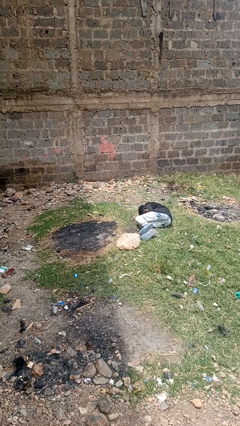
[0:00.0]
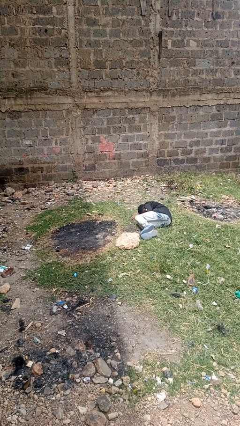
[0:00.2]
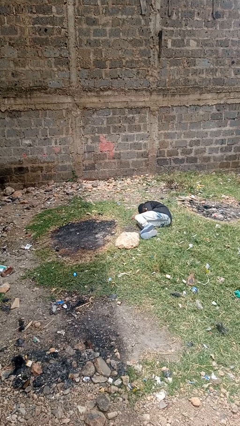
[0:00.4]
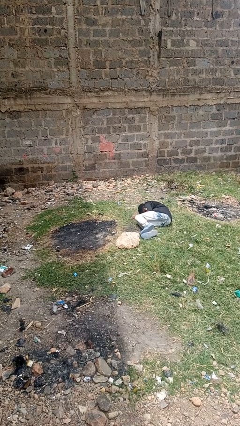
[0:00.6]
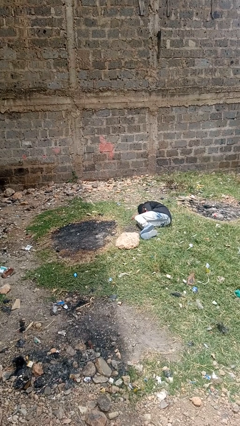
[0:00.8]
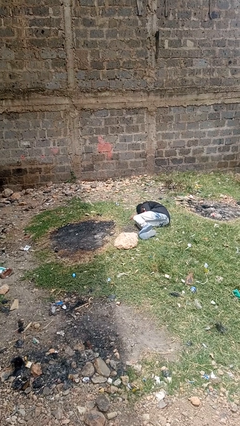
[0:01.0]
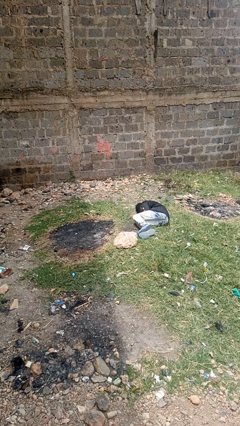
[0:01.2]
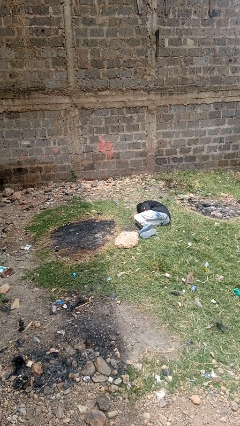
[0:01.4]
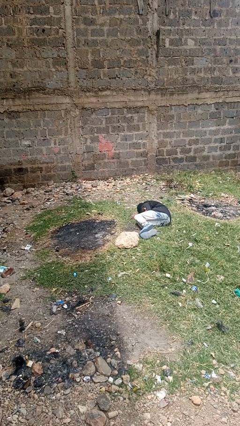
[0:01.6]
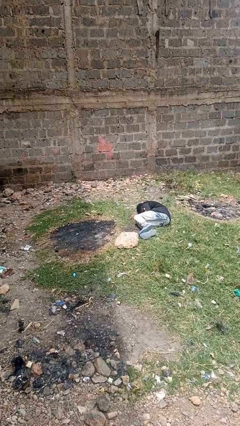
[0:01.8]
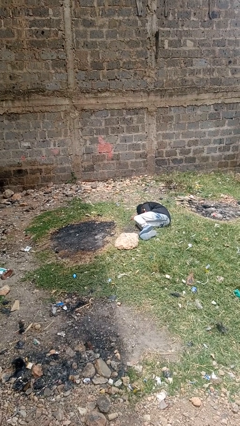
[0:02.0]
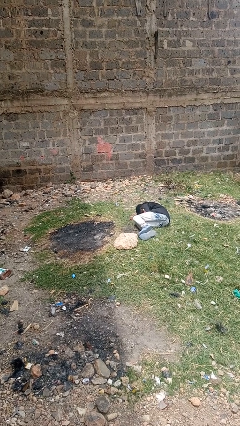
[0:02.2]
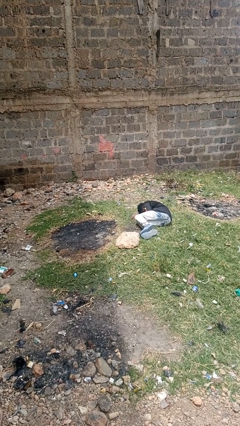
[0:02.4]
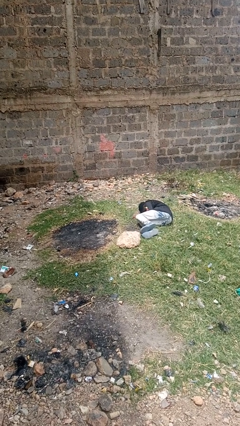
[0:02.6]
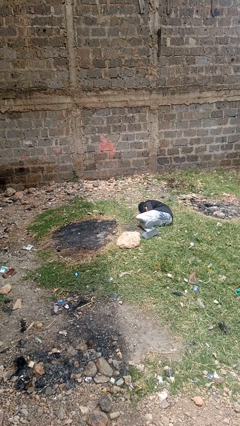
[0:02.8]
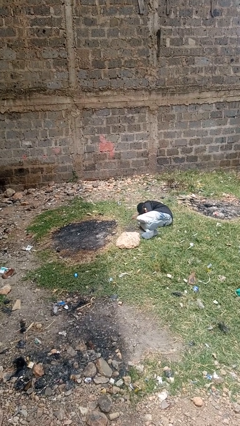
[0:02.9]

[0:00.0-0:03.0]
person lies down on floor

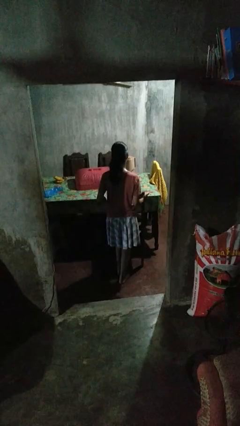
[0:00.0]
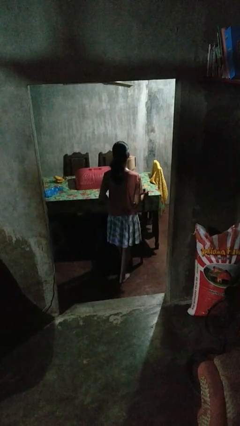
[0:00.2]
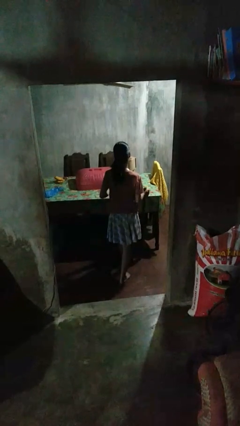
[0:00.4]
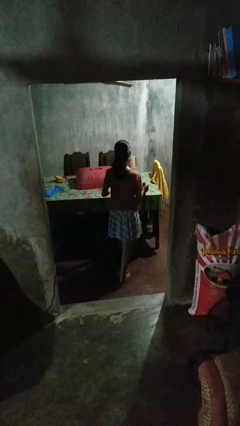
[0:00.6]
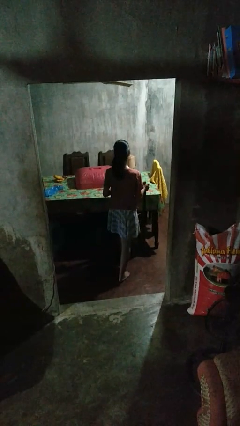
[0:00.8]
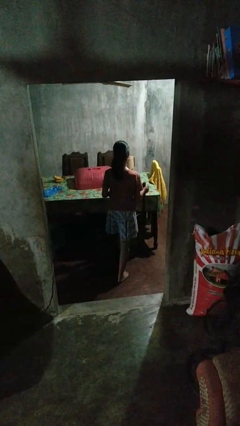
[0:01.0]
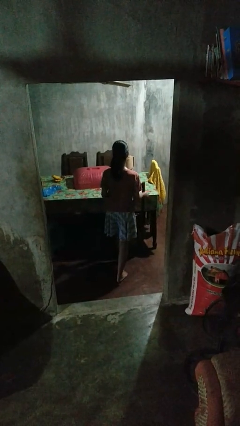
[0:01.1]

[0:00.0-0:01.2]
person pushes in chair

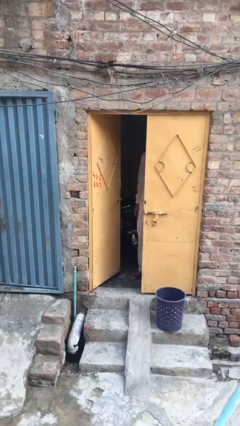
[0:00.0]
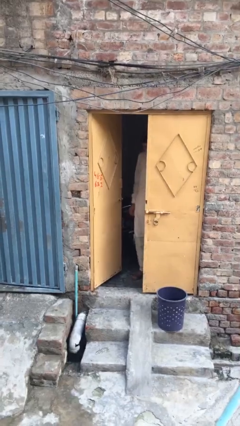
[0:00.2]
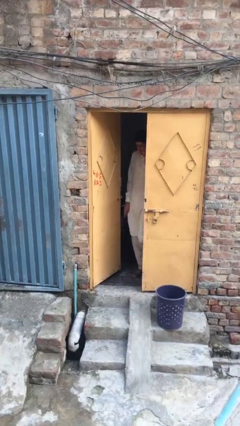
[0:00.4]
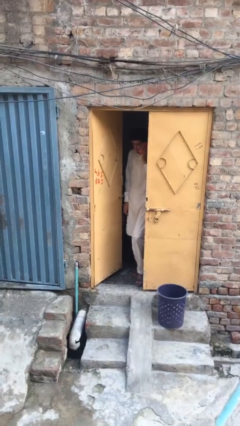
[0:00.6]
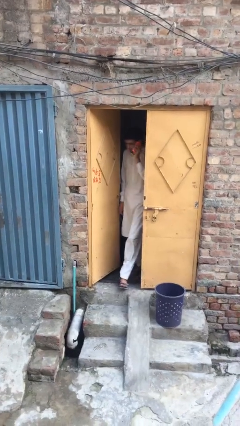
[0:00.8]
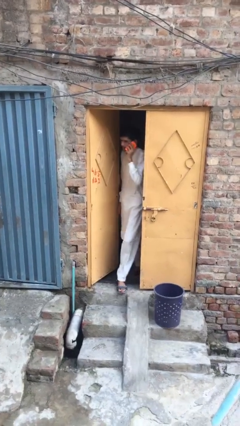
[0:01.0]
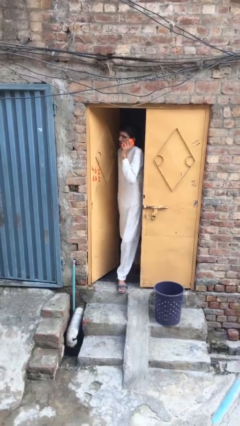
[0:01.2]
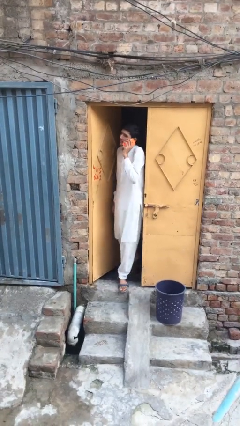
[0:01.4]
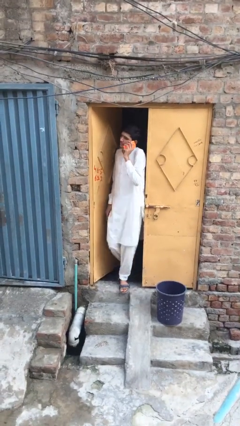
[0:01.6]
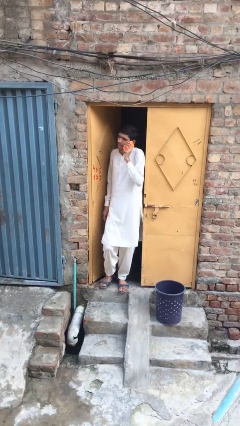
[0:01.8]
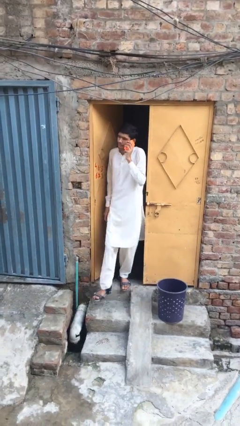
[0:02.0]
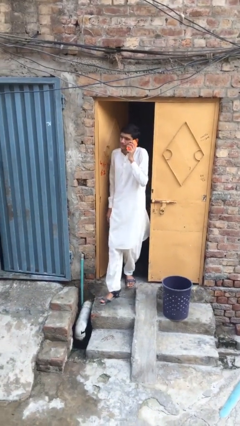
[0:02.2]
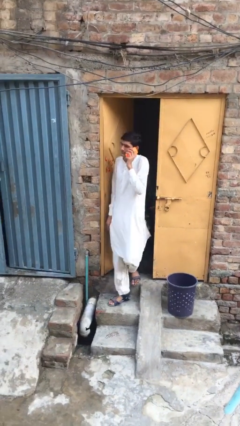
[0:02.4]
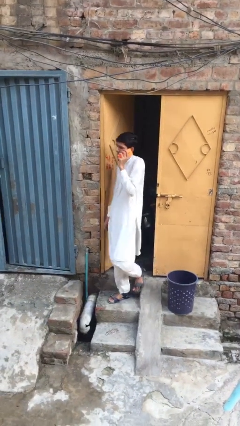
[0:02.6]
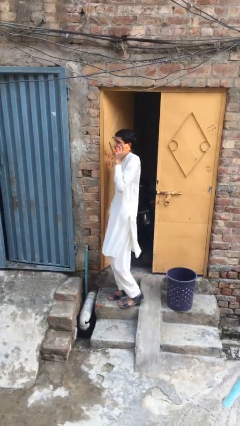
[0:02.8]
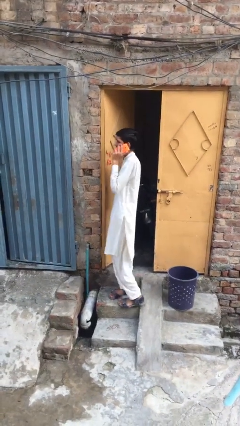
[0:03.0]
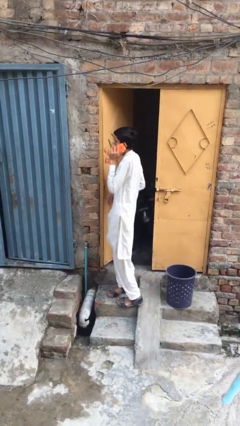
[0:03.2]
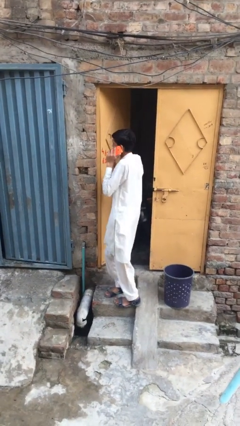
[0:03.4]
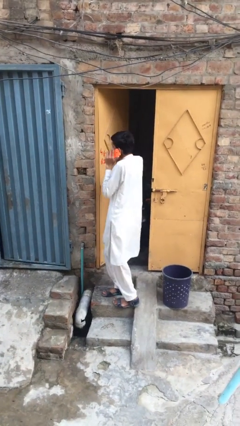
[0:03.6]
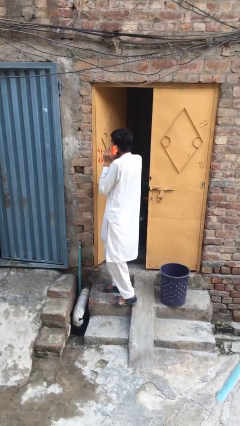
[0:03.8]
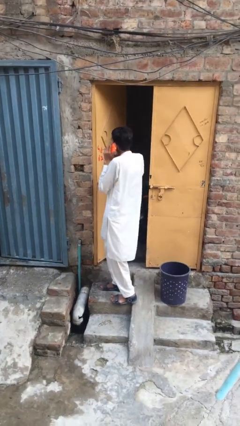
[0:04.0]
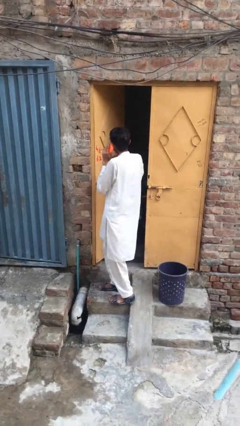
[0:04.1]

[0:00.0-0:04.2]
person enters scene through structure

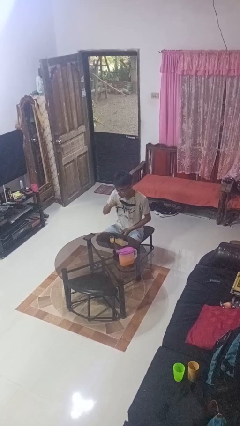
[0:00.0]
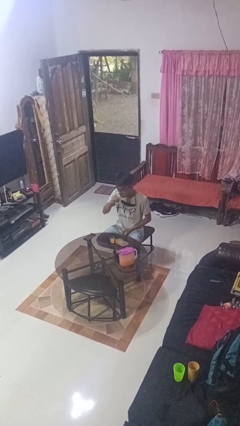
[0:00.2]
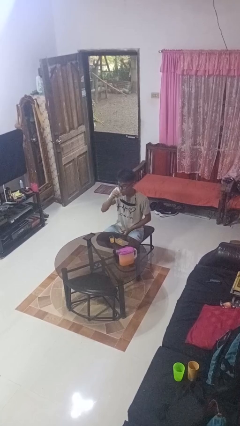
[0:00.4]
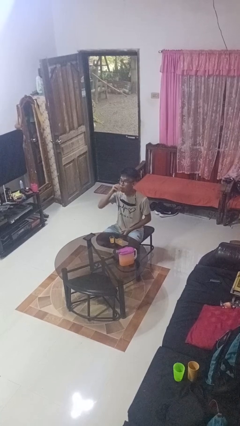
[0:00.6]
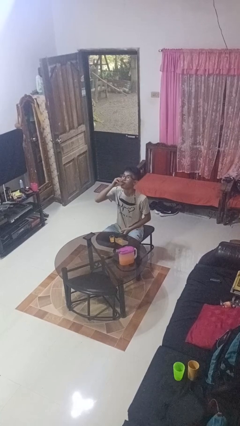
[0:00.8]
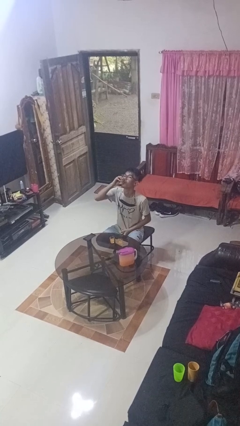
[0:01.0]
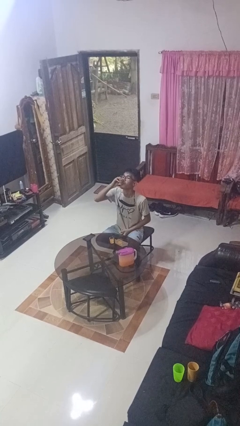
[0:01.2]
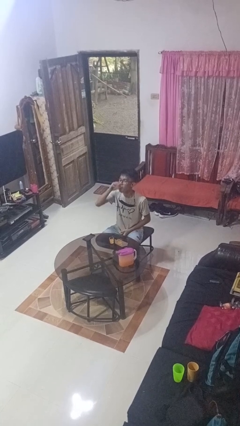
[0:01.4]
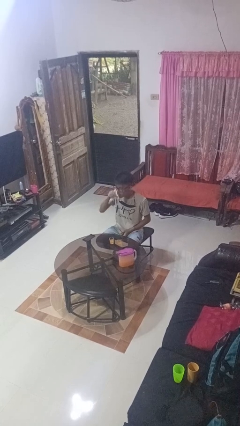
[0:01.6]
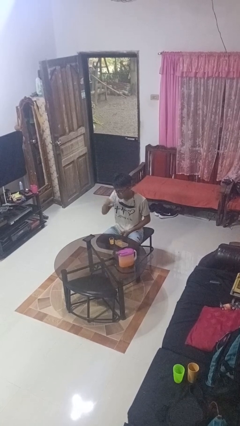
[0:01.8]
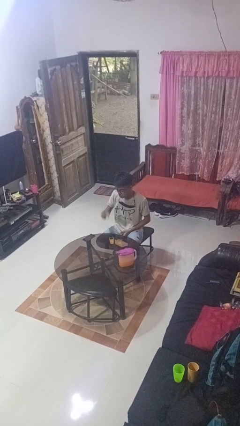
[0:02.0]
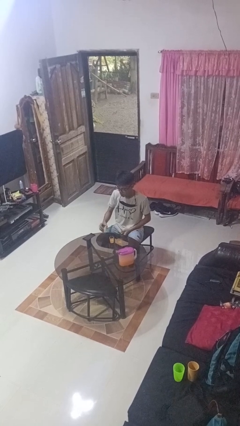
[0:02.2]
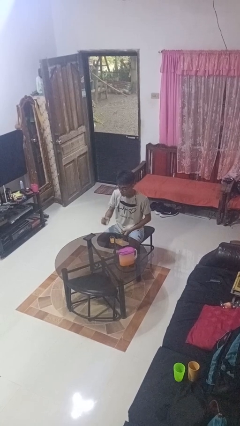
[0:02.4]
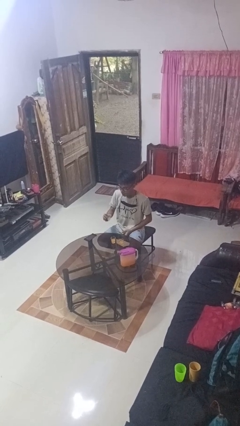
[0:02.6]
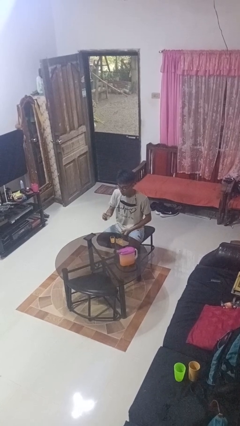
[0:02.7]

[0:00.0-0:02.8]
person drinks from shotglass

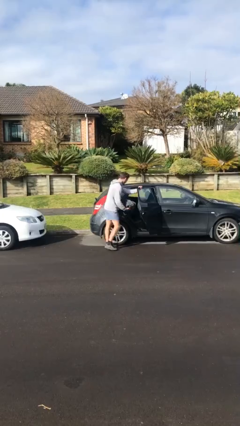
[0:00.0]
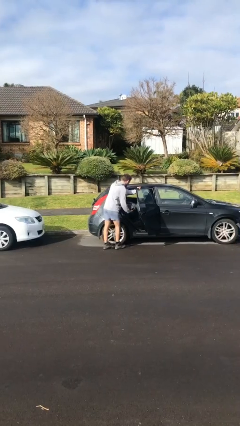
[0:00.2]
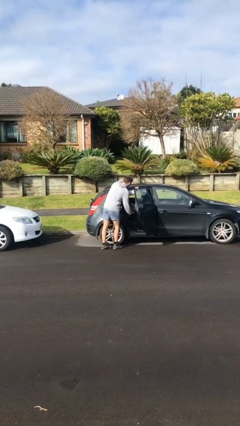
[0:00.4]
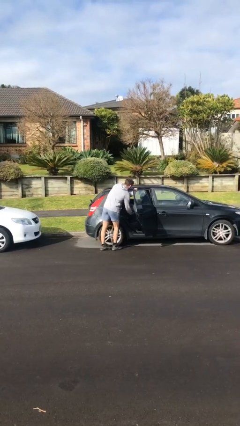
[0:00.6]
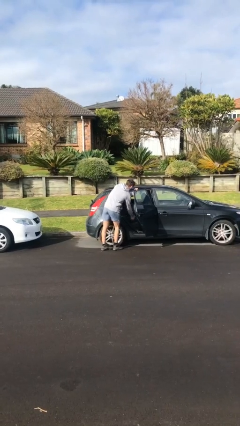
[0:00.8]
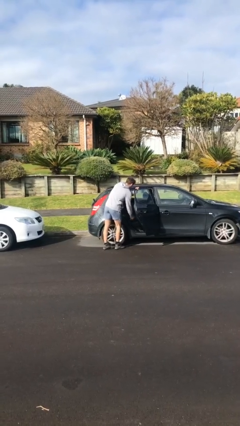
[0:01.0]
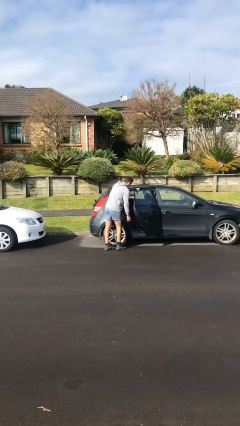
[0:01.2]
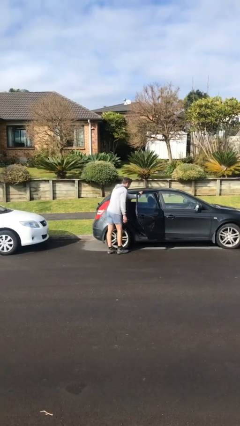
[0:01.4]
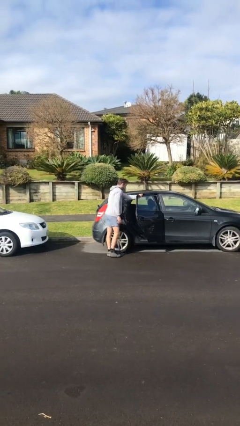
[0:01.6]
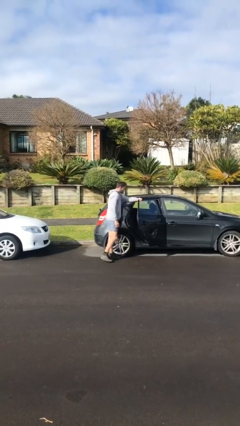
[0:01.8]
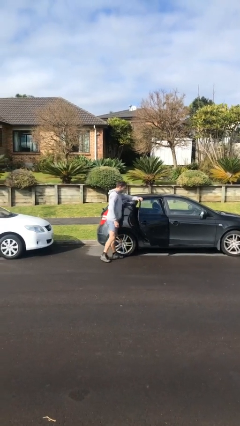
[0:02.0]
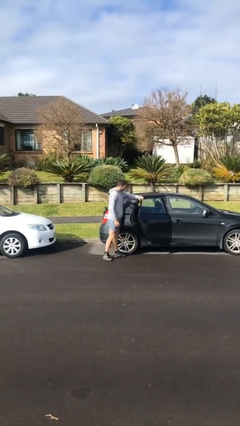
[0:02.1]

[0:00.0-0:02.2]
person loads car

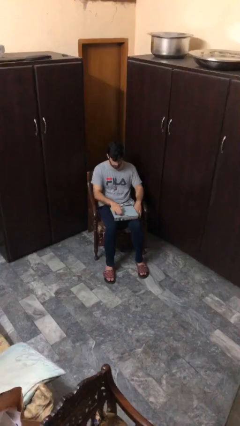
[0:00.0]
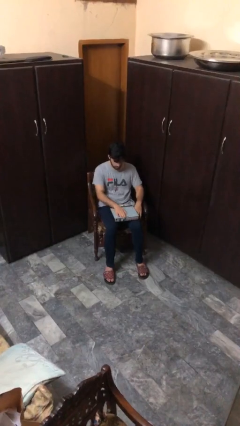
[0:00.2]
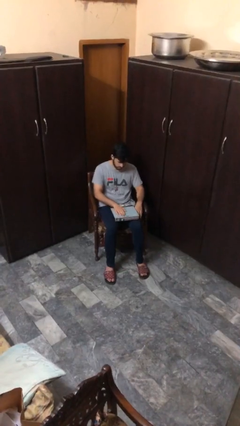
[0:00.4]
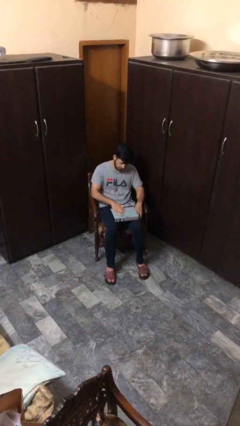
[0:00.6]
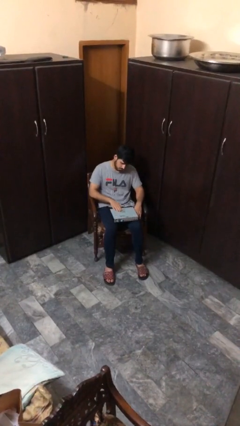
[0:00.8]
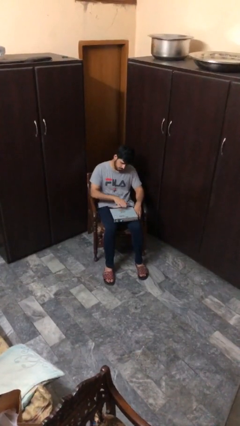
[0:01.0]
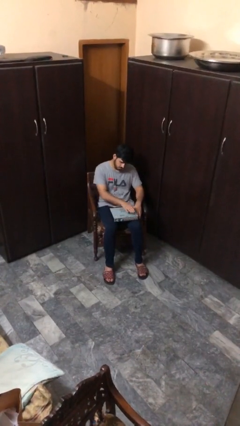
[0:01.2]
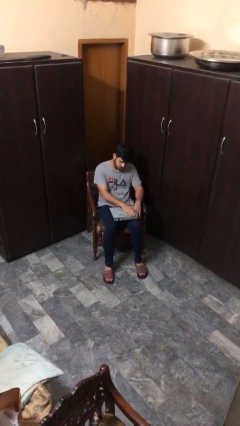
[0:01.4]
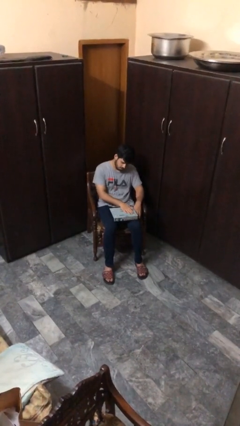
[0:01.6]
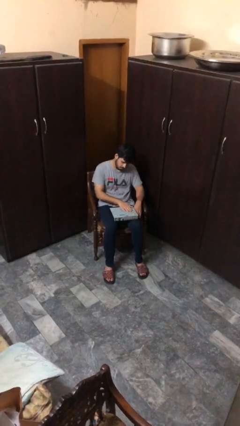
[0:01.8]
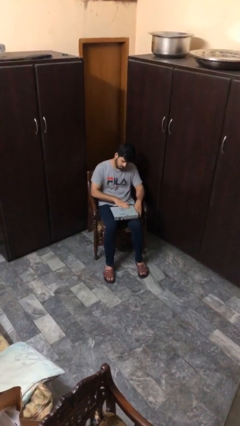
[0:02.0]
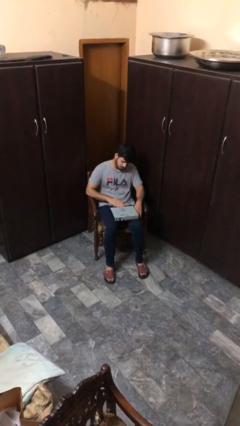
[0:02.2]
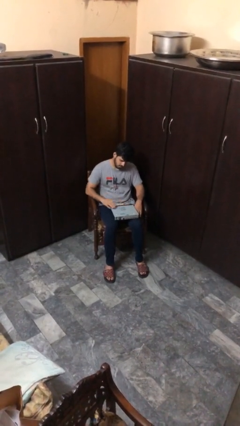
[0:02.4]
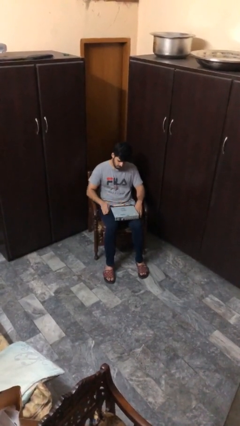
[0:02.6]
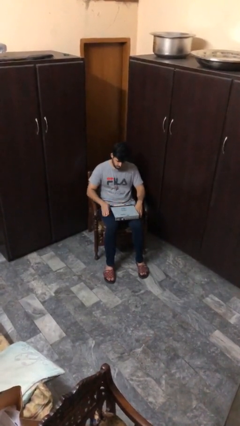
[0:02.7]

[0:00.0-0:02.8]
person waves hand over object

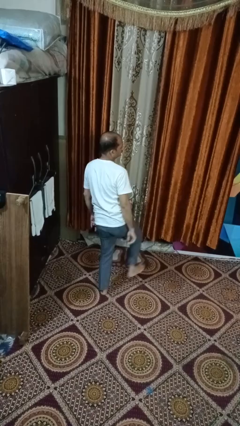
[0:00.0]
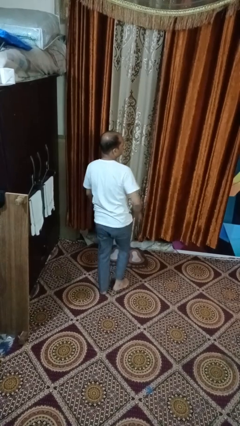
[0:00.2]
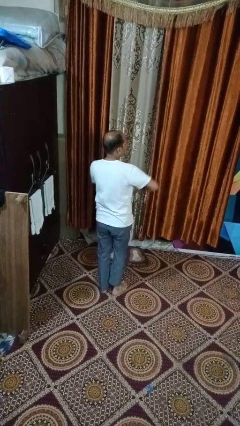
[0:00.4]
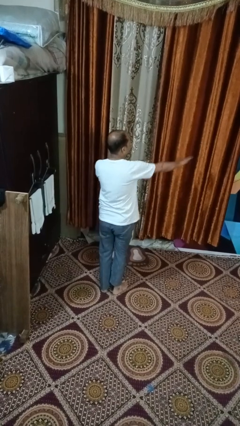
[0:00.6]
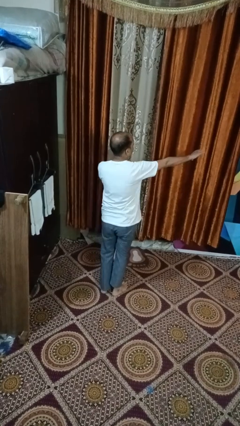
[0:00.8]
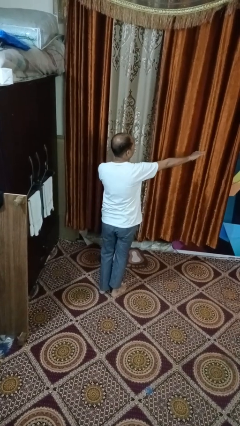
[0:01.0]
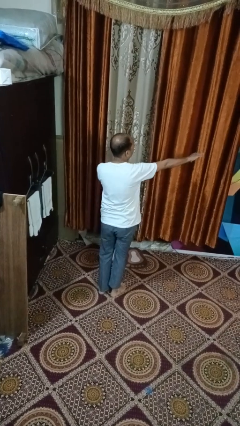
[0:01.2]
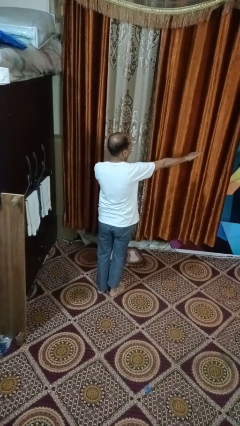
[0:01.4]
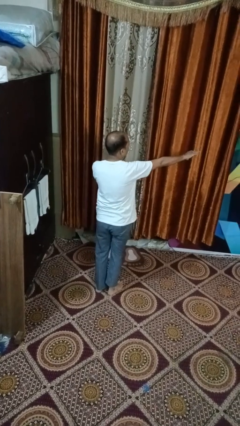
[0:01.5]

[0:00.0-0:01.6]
person karate chop
